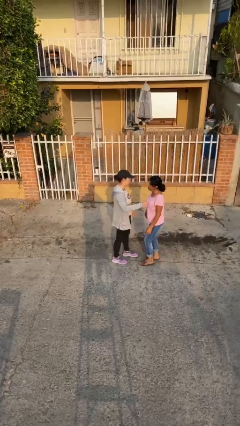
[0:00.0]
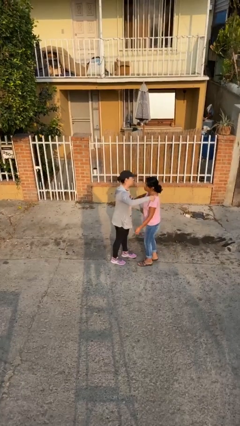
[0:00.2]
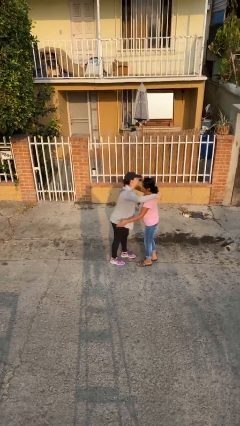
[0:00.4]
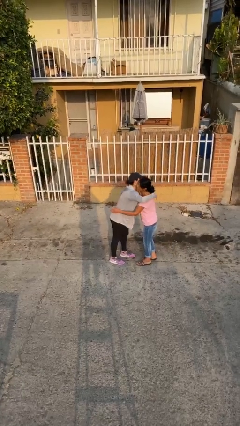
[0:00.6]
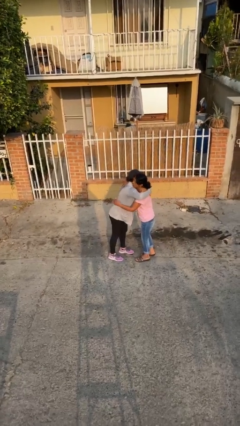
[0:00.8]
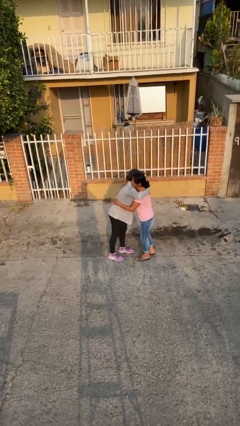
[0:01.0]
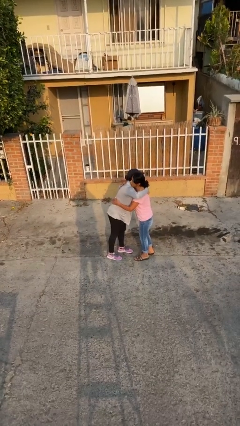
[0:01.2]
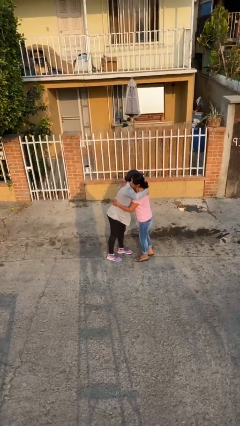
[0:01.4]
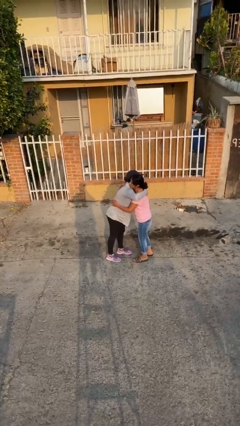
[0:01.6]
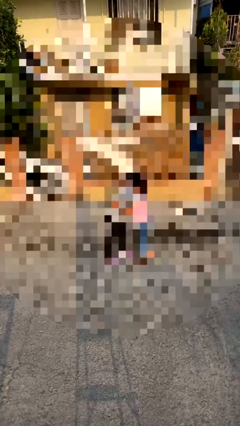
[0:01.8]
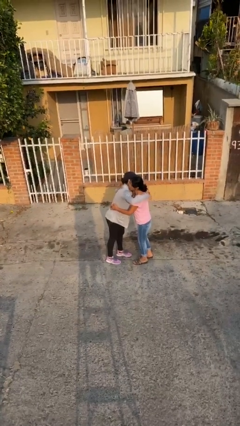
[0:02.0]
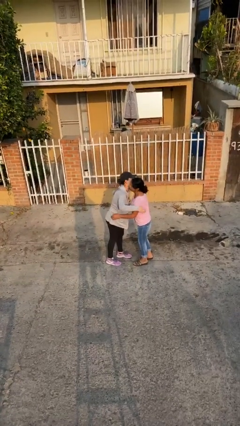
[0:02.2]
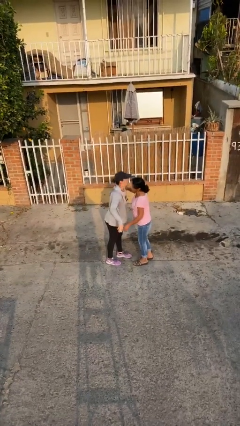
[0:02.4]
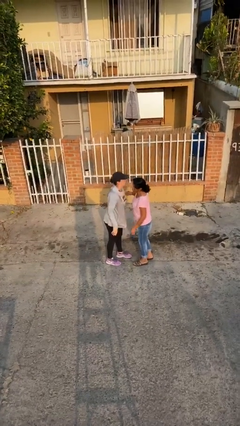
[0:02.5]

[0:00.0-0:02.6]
person embraces person

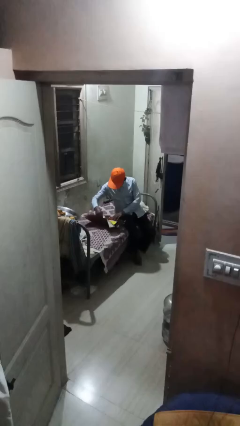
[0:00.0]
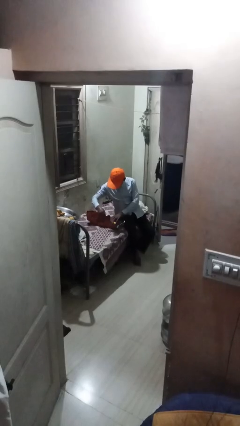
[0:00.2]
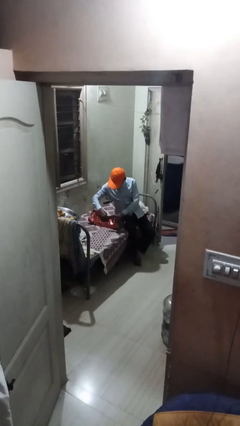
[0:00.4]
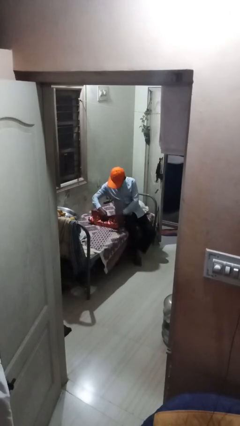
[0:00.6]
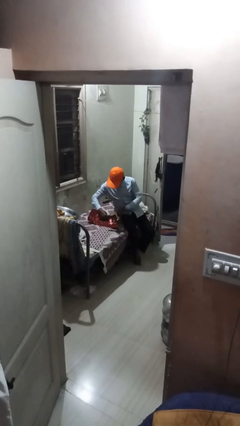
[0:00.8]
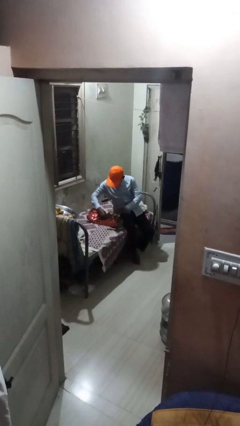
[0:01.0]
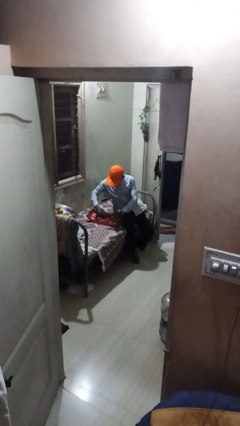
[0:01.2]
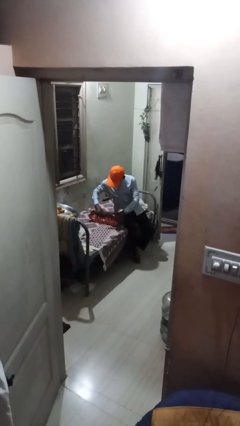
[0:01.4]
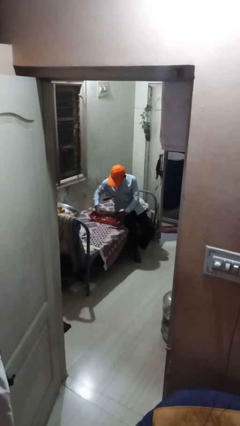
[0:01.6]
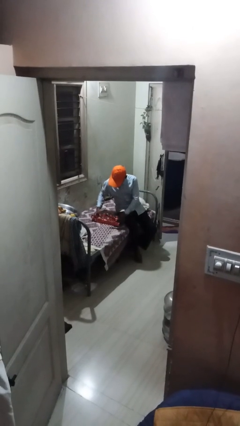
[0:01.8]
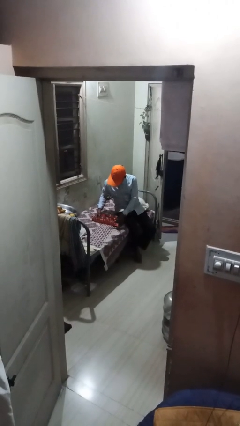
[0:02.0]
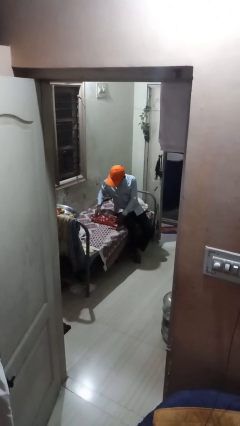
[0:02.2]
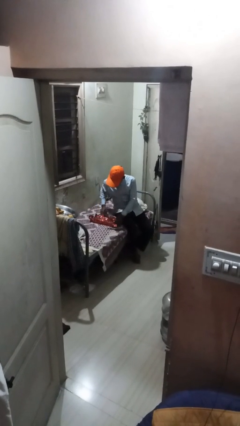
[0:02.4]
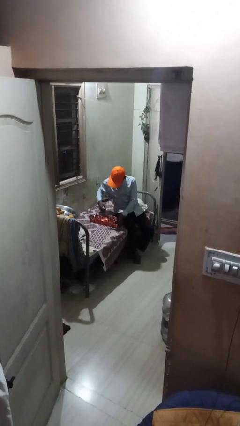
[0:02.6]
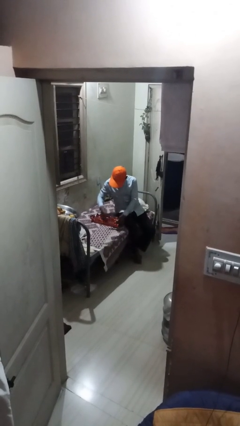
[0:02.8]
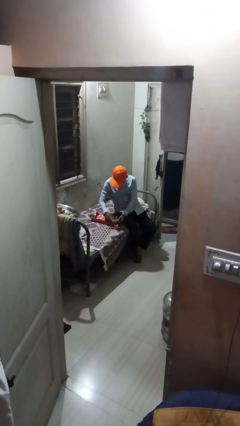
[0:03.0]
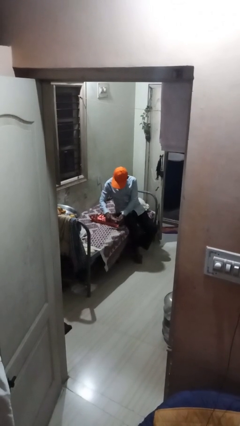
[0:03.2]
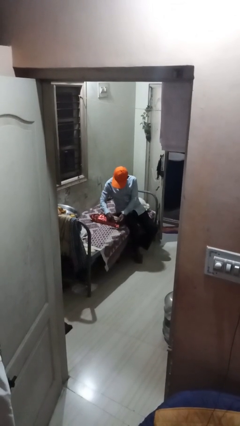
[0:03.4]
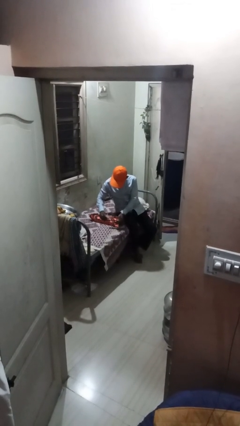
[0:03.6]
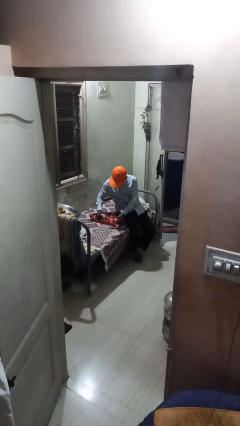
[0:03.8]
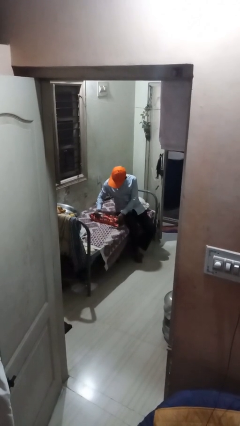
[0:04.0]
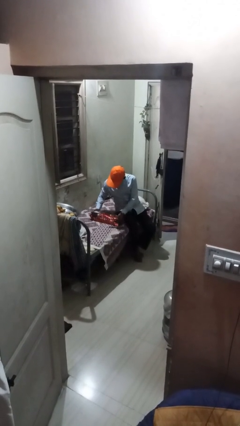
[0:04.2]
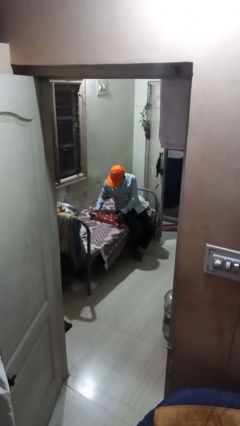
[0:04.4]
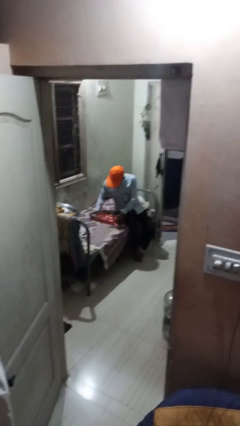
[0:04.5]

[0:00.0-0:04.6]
person wraps box

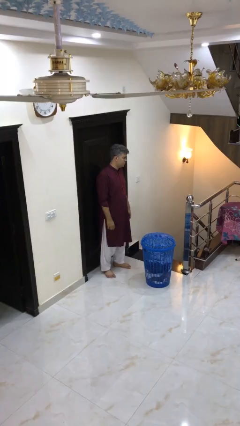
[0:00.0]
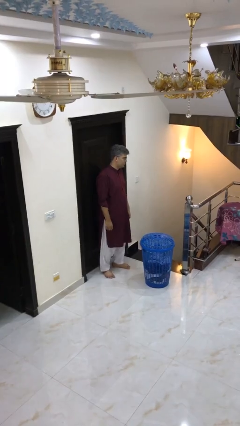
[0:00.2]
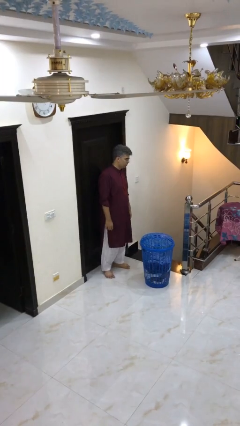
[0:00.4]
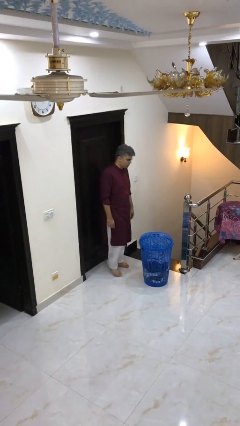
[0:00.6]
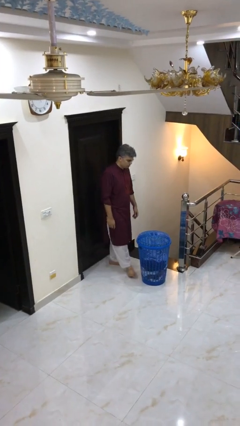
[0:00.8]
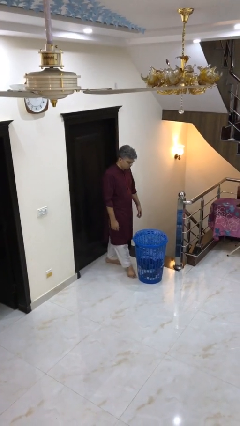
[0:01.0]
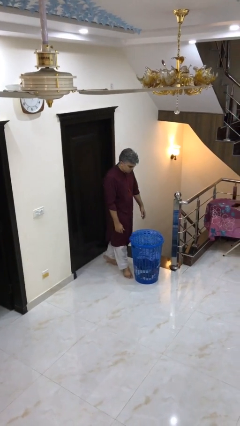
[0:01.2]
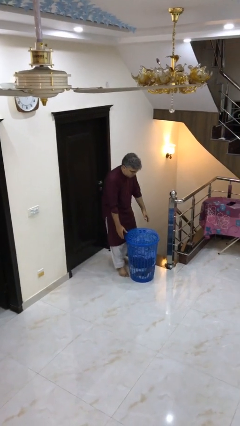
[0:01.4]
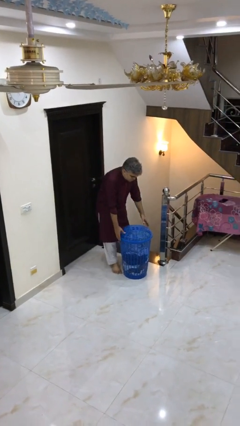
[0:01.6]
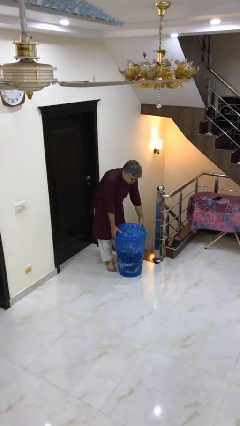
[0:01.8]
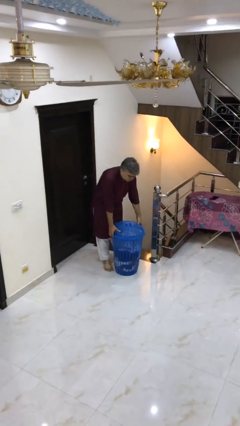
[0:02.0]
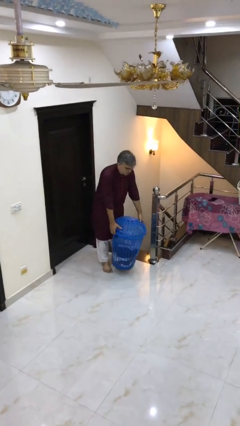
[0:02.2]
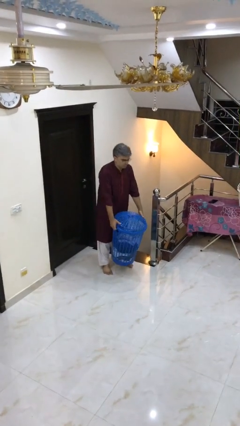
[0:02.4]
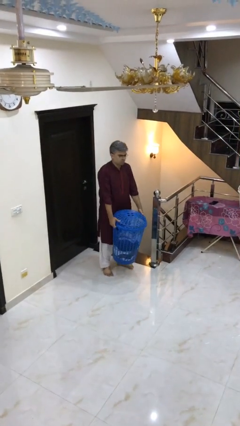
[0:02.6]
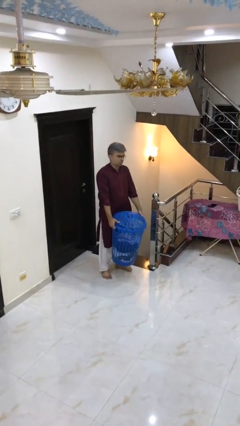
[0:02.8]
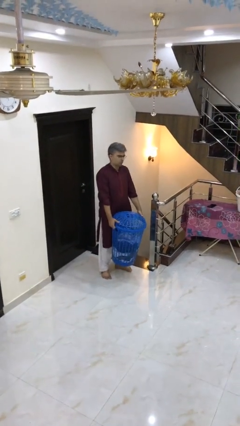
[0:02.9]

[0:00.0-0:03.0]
person picks up object from floor

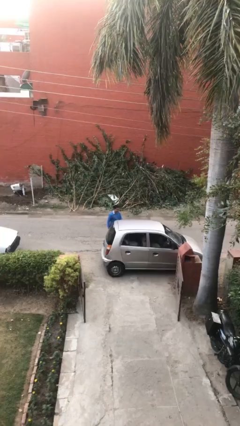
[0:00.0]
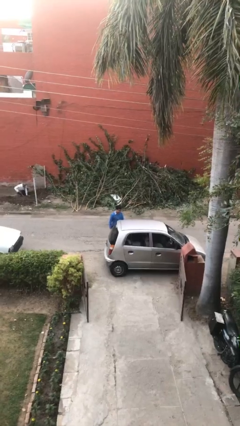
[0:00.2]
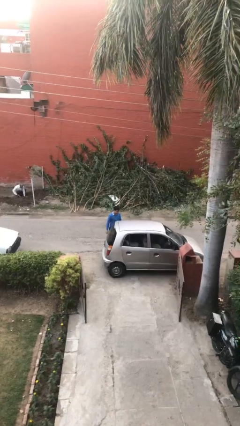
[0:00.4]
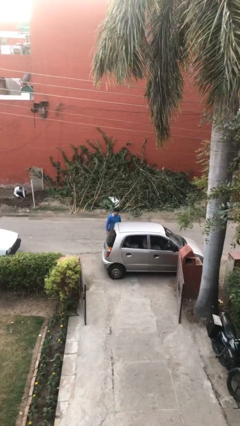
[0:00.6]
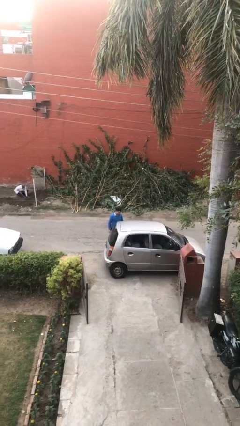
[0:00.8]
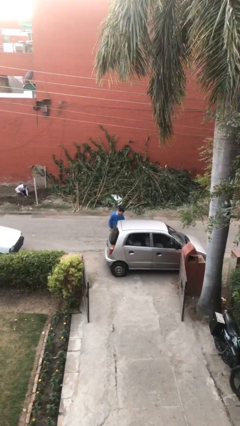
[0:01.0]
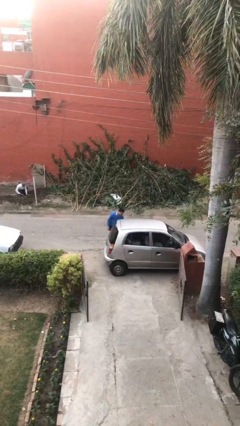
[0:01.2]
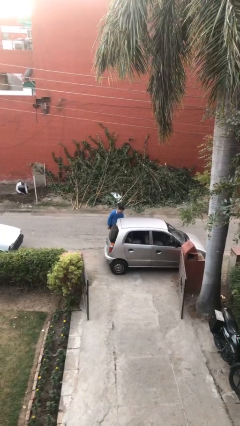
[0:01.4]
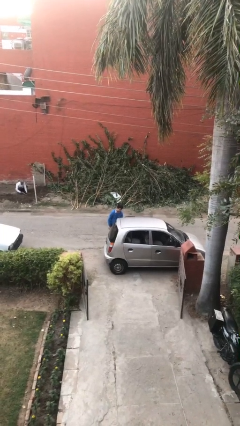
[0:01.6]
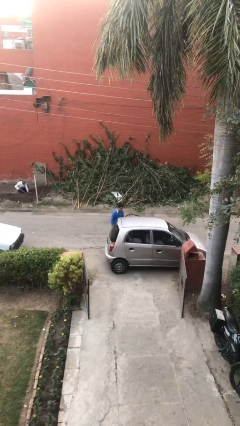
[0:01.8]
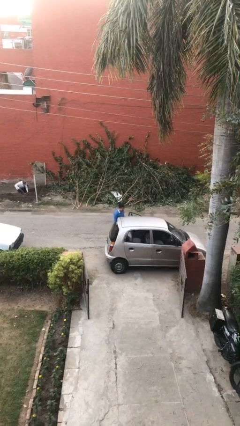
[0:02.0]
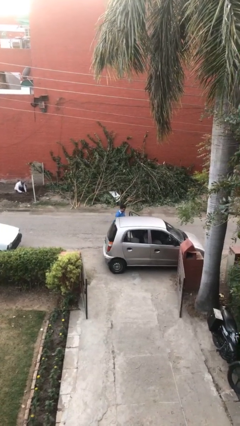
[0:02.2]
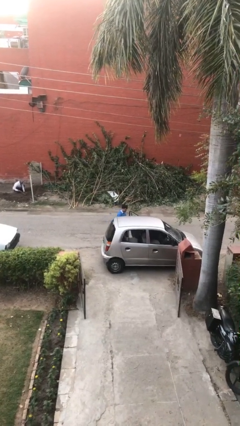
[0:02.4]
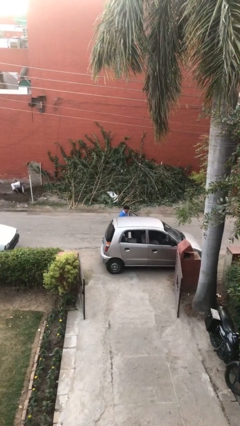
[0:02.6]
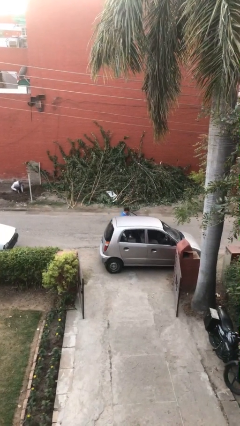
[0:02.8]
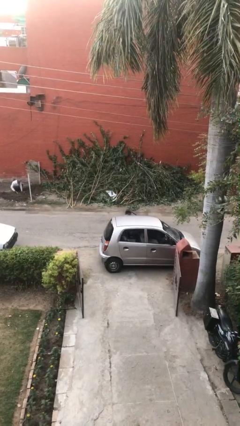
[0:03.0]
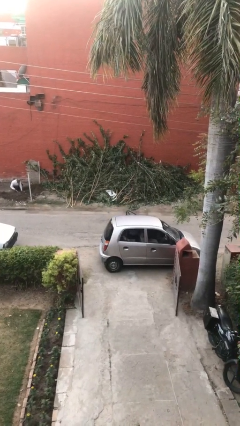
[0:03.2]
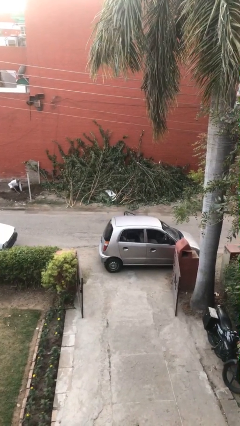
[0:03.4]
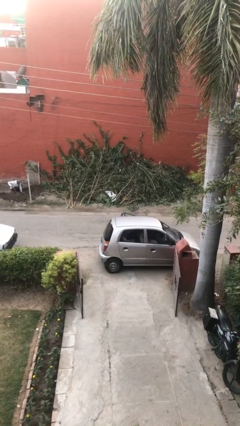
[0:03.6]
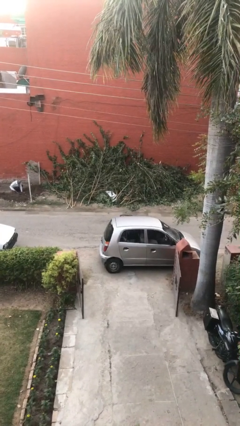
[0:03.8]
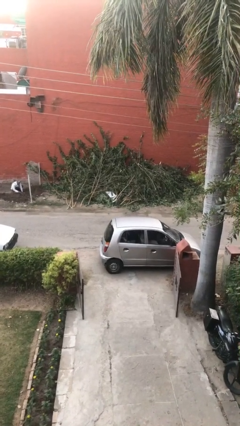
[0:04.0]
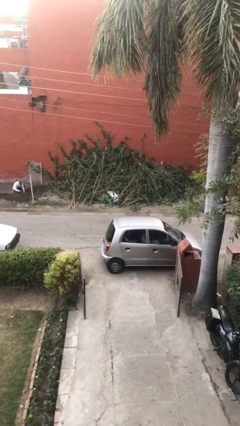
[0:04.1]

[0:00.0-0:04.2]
person enters car

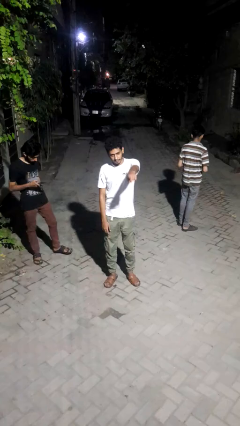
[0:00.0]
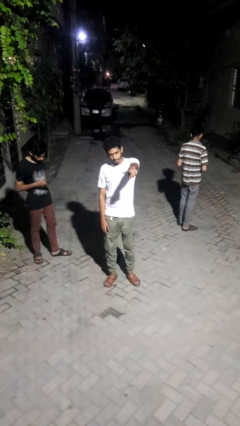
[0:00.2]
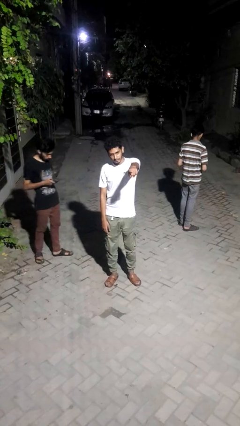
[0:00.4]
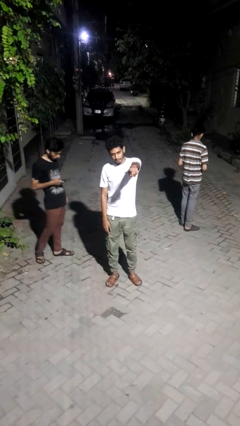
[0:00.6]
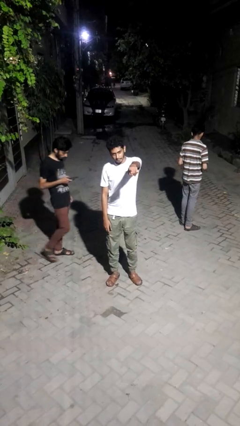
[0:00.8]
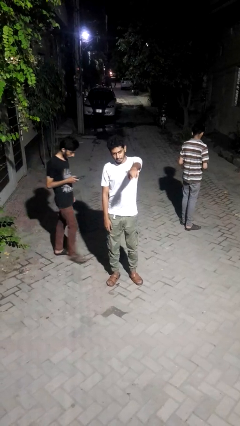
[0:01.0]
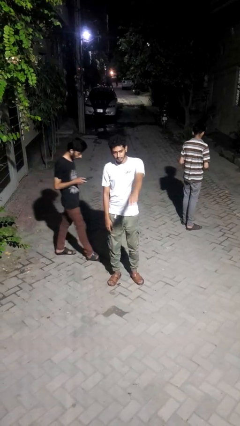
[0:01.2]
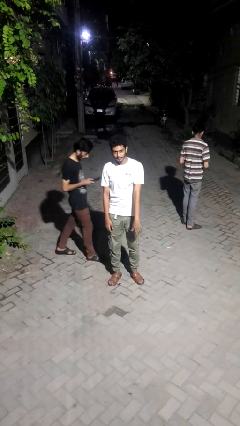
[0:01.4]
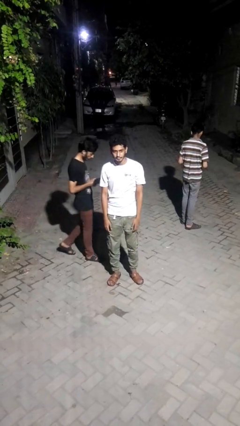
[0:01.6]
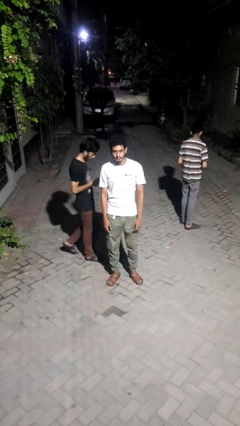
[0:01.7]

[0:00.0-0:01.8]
person points at person

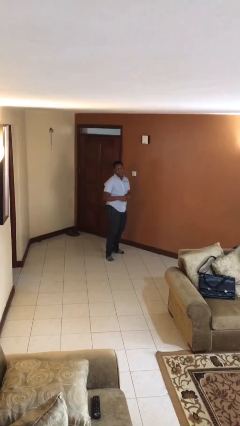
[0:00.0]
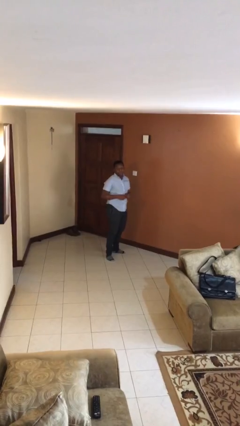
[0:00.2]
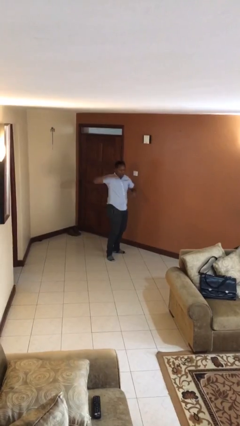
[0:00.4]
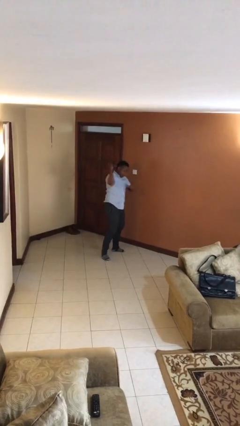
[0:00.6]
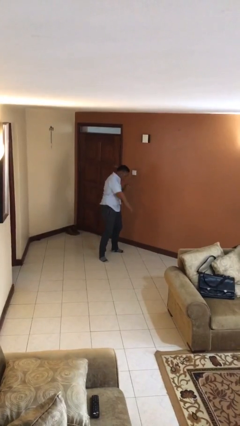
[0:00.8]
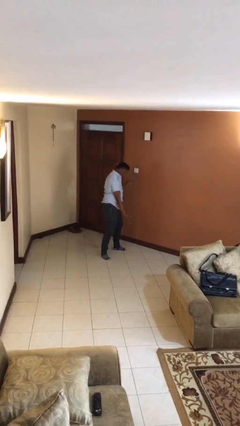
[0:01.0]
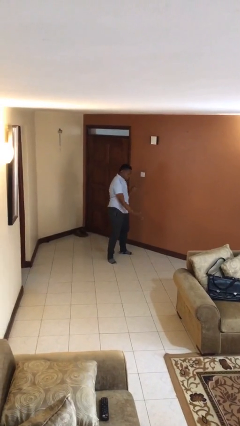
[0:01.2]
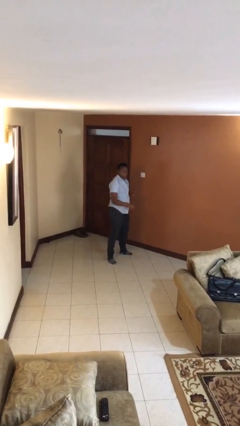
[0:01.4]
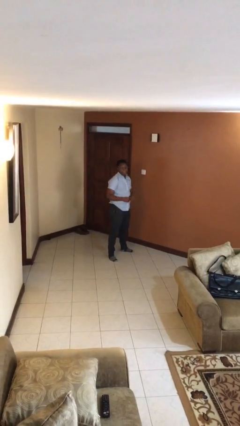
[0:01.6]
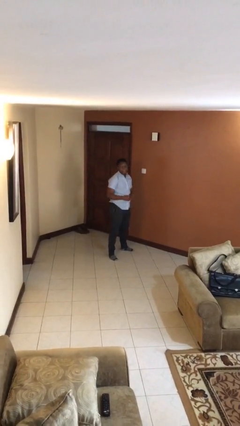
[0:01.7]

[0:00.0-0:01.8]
person karate chop
